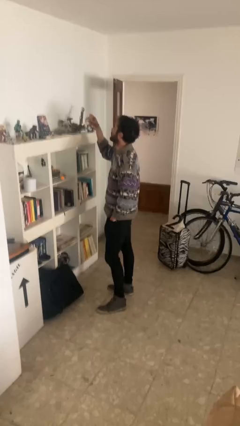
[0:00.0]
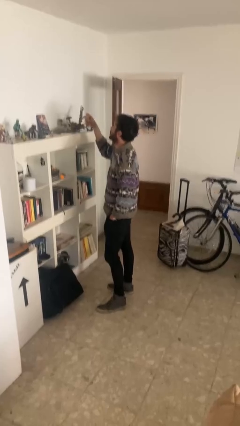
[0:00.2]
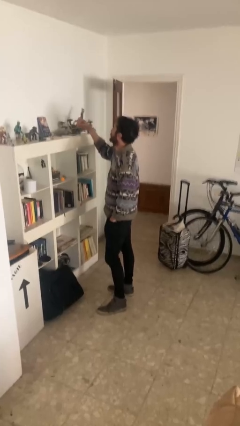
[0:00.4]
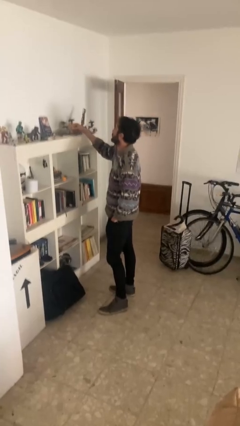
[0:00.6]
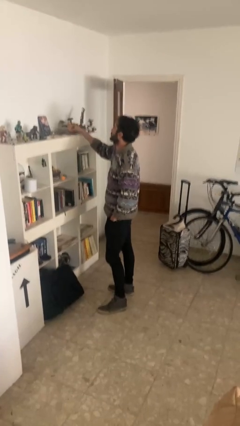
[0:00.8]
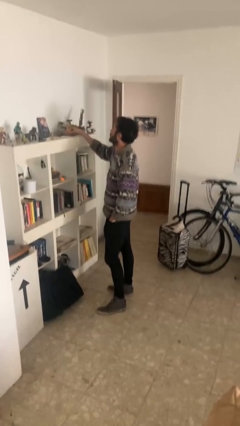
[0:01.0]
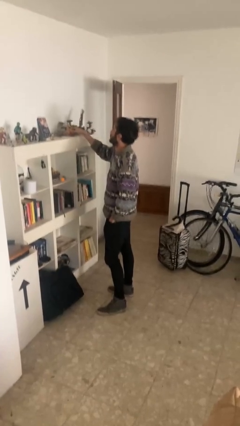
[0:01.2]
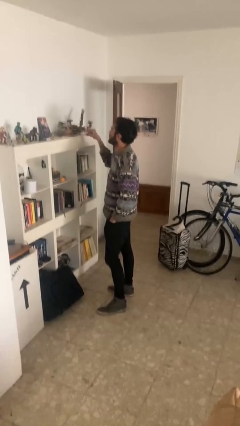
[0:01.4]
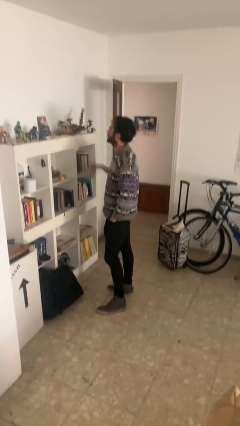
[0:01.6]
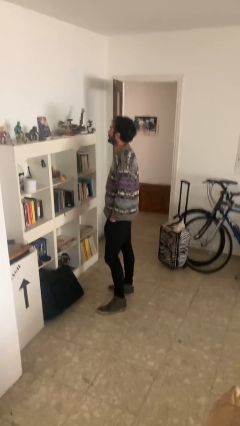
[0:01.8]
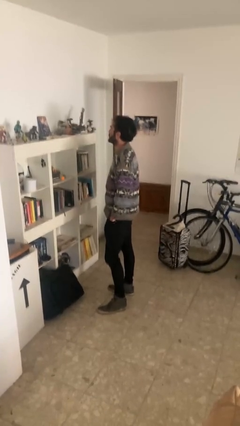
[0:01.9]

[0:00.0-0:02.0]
person puts down object on shelf

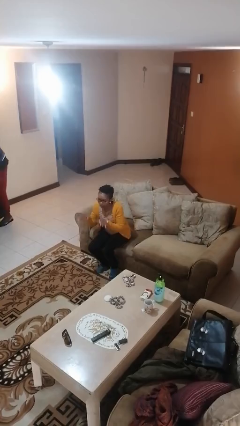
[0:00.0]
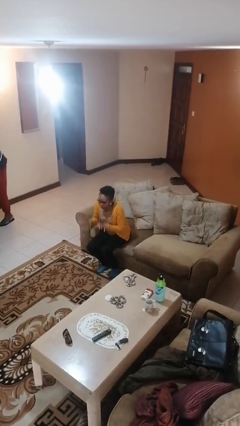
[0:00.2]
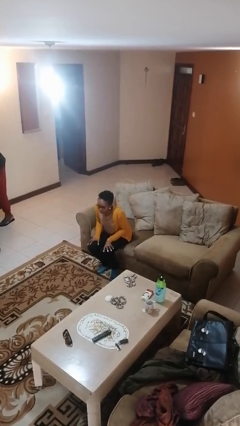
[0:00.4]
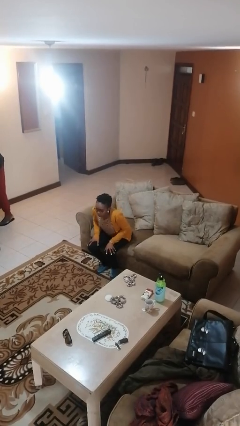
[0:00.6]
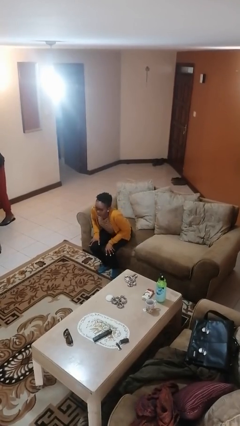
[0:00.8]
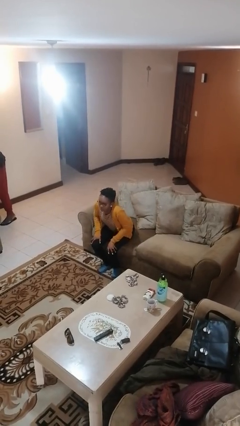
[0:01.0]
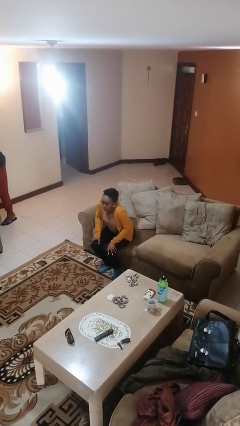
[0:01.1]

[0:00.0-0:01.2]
person slaps hands on thighs

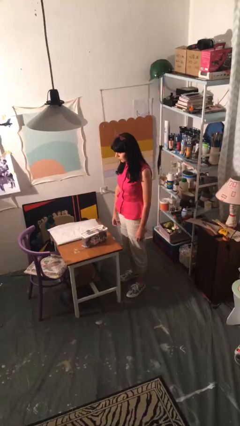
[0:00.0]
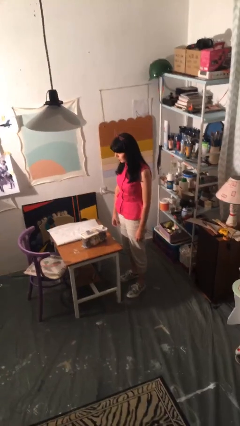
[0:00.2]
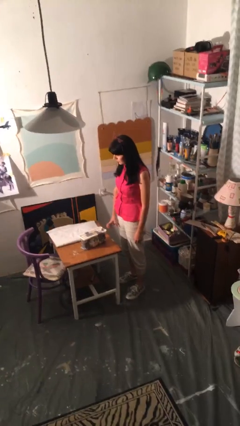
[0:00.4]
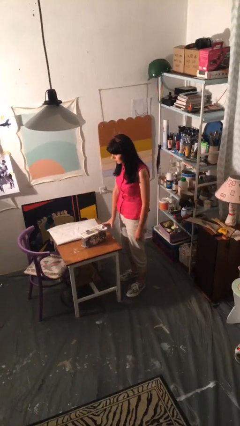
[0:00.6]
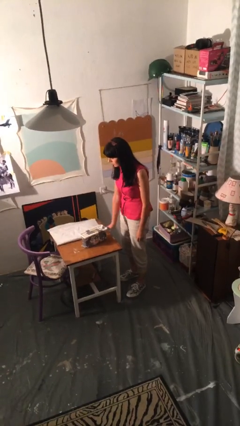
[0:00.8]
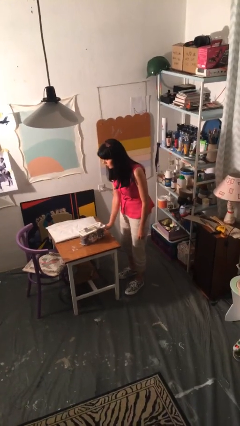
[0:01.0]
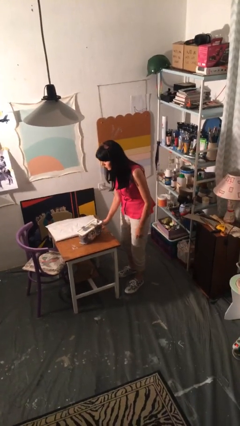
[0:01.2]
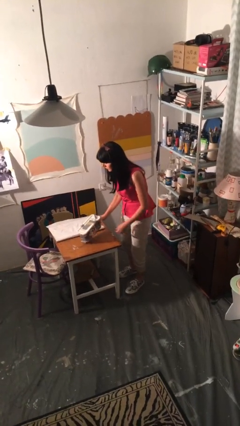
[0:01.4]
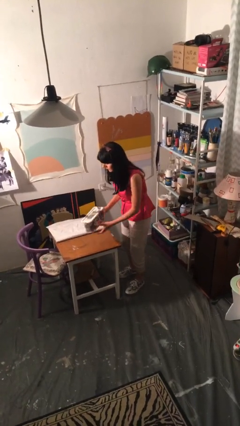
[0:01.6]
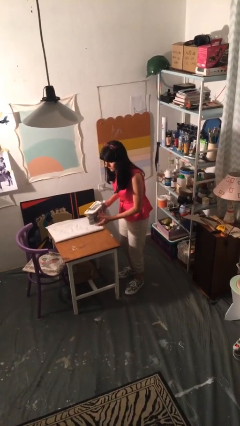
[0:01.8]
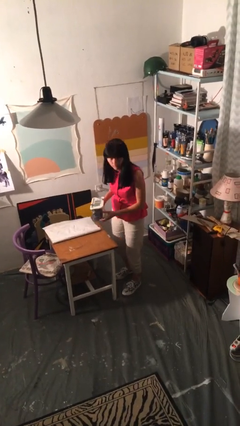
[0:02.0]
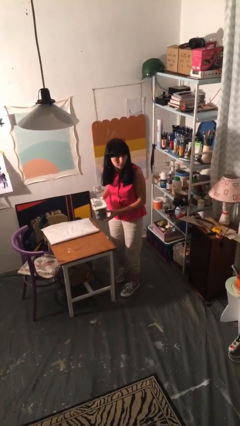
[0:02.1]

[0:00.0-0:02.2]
person picks up object from table

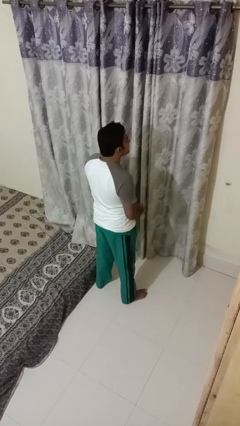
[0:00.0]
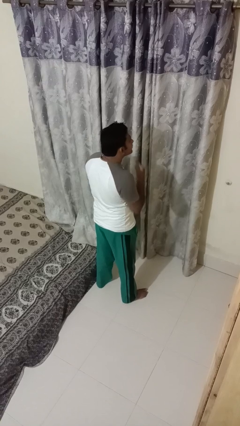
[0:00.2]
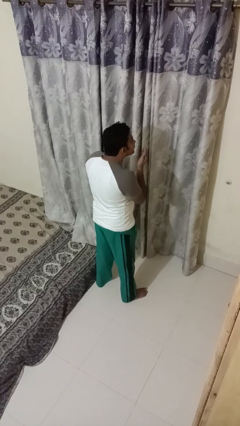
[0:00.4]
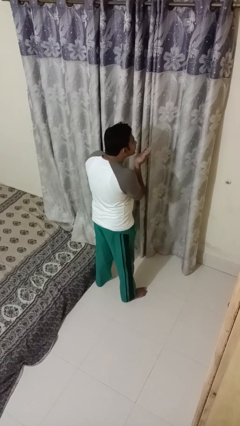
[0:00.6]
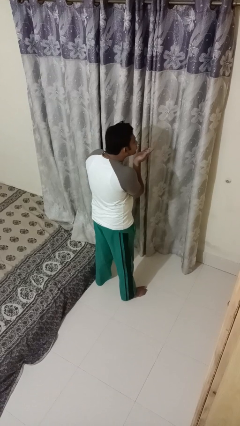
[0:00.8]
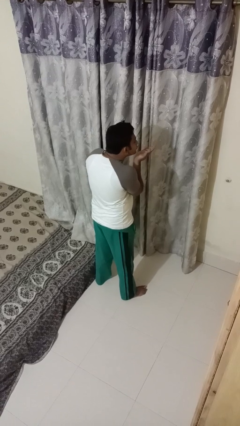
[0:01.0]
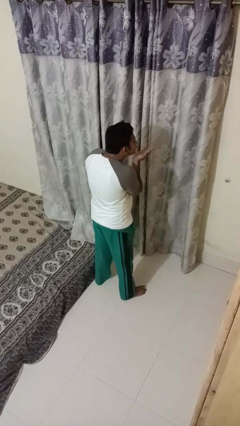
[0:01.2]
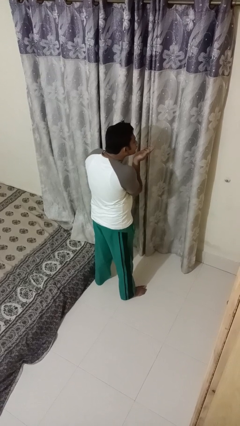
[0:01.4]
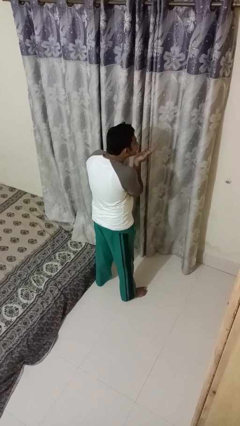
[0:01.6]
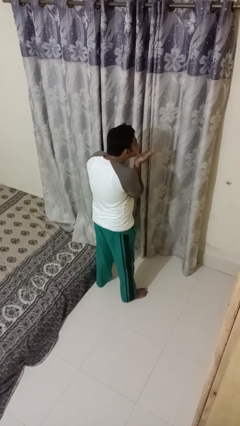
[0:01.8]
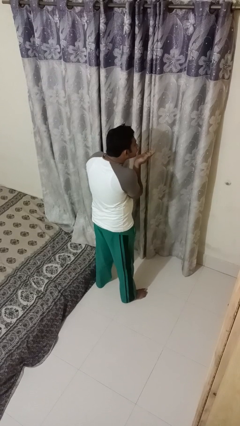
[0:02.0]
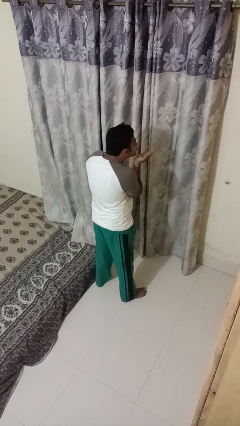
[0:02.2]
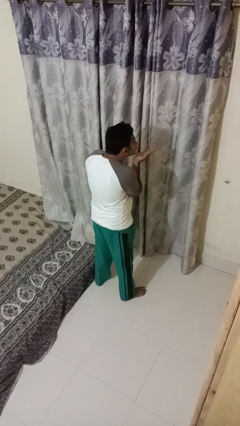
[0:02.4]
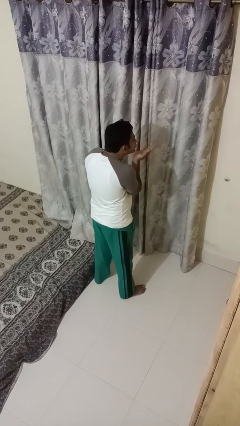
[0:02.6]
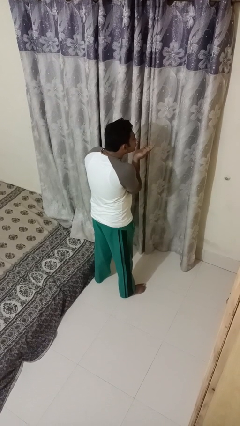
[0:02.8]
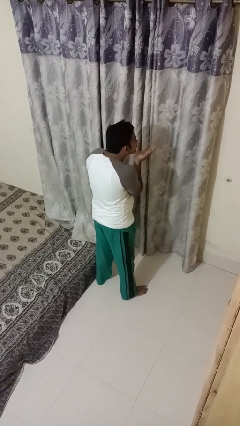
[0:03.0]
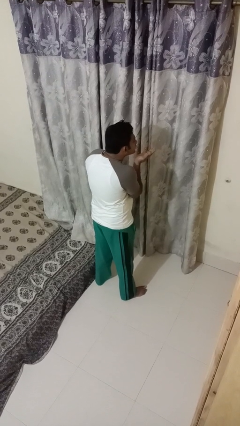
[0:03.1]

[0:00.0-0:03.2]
person gestures blow kiss

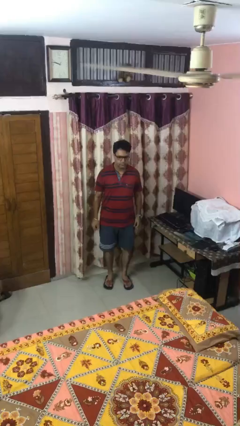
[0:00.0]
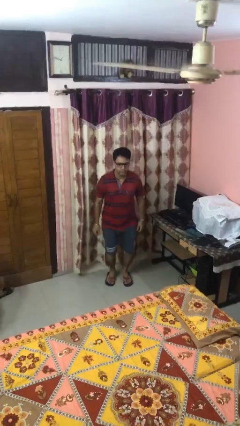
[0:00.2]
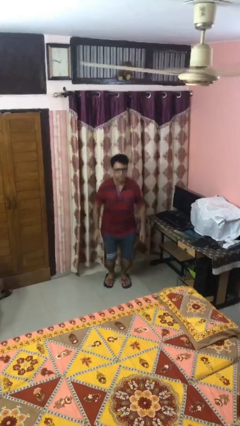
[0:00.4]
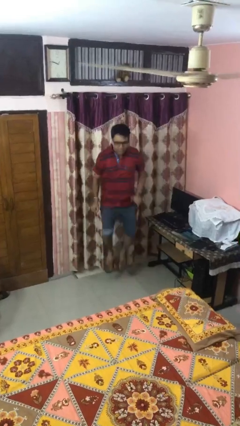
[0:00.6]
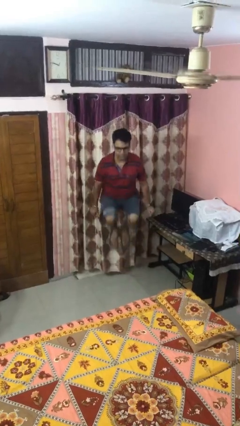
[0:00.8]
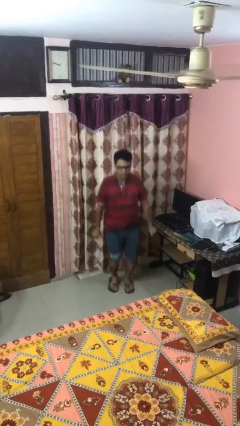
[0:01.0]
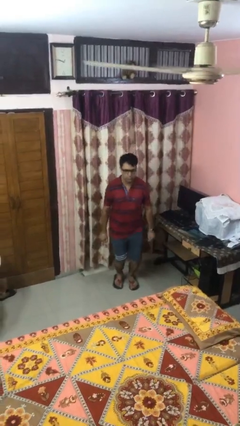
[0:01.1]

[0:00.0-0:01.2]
person jumps

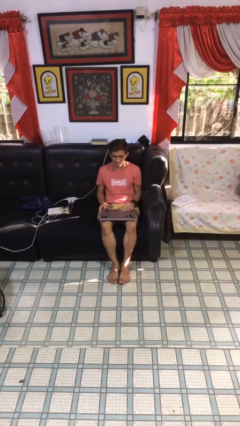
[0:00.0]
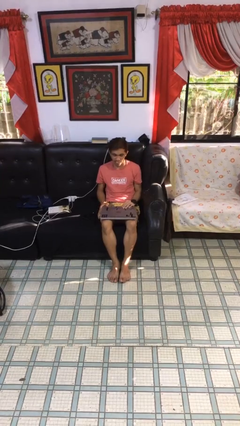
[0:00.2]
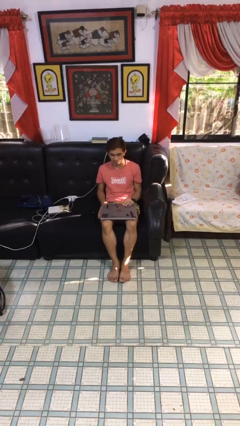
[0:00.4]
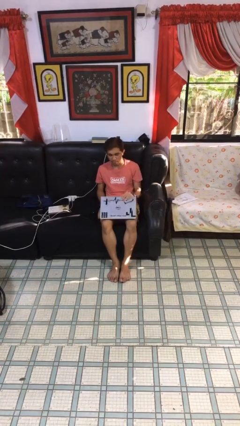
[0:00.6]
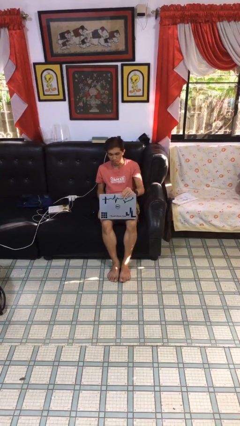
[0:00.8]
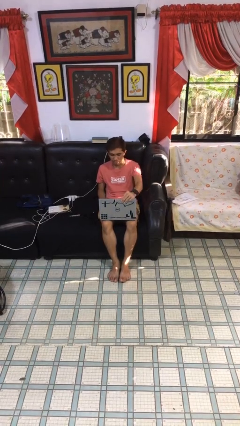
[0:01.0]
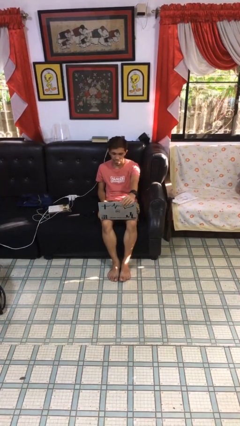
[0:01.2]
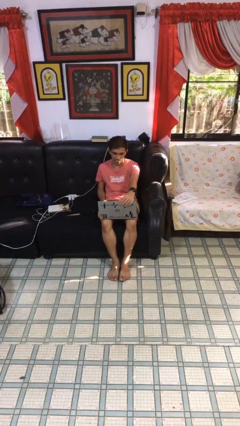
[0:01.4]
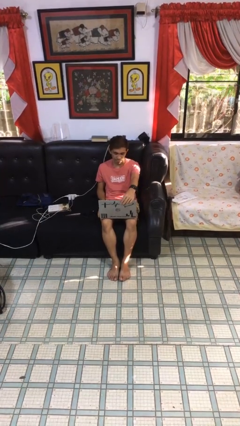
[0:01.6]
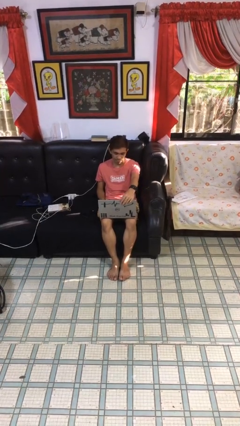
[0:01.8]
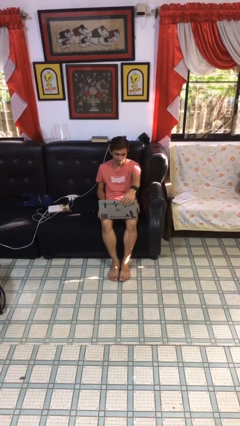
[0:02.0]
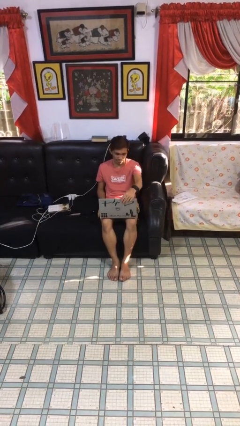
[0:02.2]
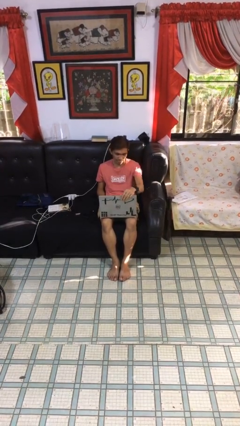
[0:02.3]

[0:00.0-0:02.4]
person interacts with laptop

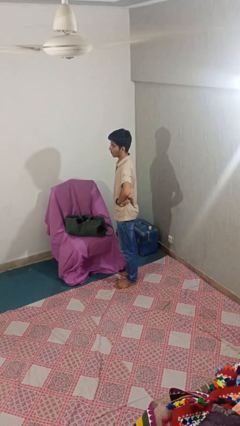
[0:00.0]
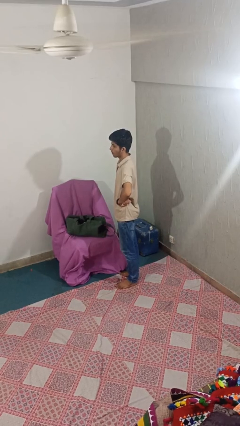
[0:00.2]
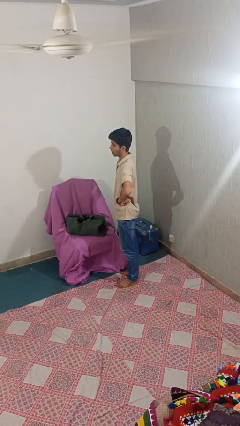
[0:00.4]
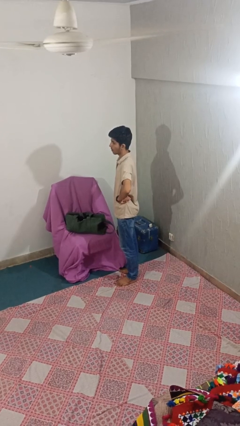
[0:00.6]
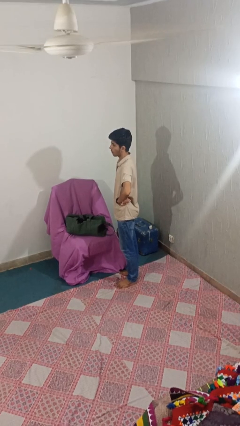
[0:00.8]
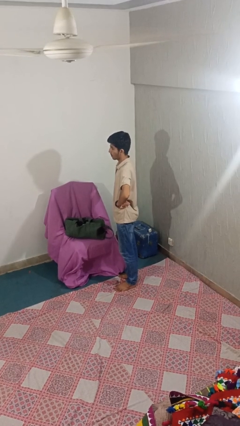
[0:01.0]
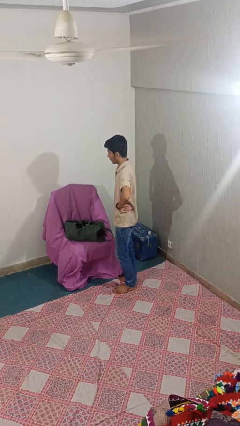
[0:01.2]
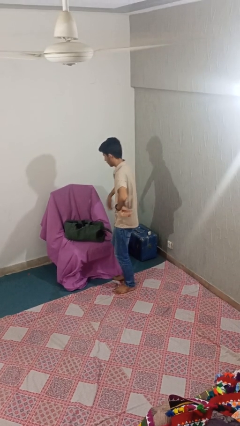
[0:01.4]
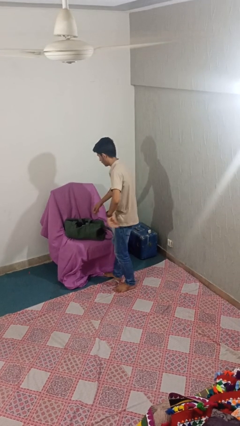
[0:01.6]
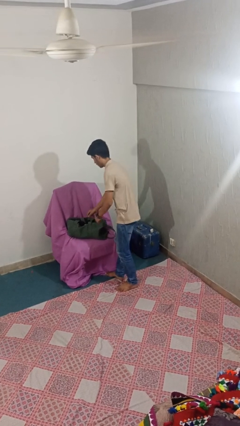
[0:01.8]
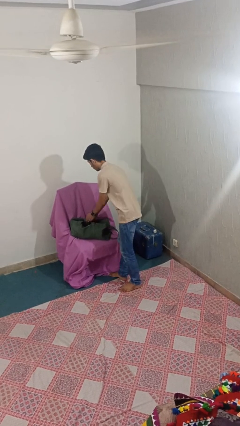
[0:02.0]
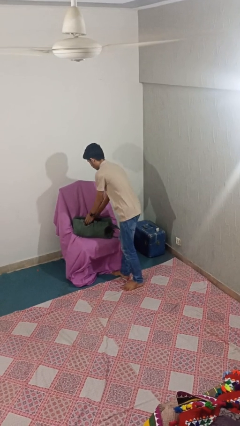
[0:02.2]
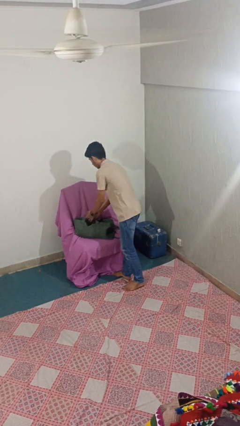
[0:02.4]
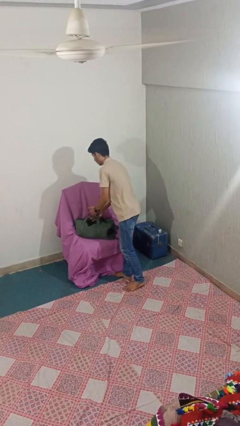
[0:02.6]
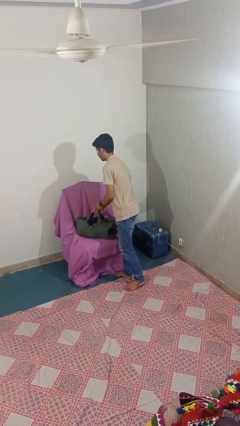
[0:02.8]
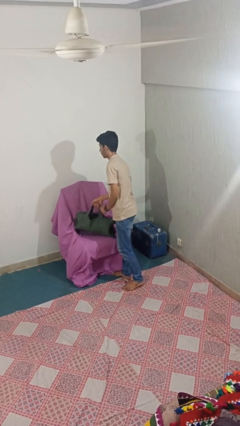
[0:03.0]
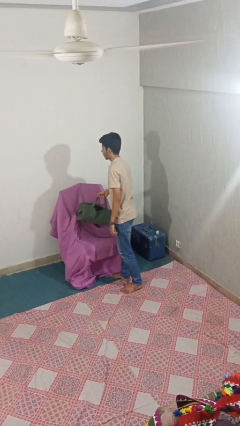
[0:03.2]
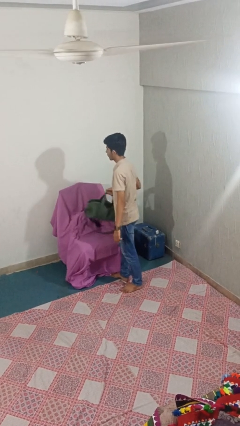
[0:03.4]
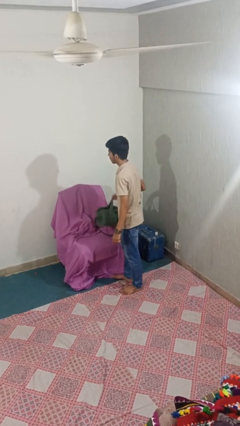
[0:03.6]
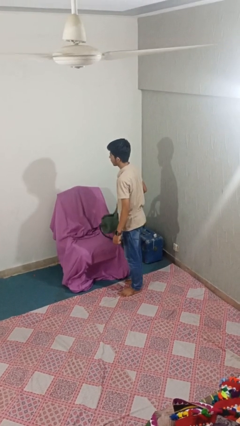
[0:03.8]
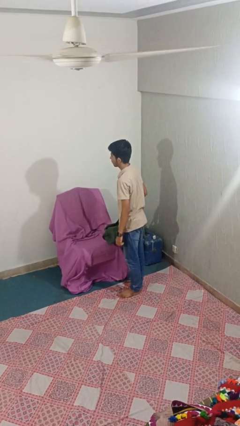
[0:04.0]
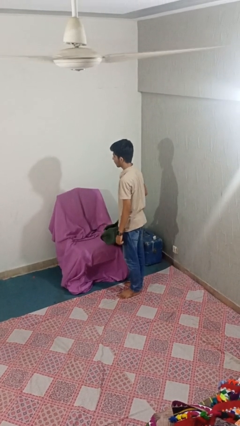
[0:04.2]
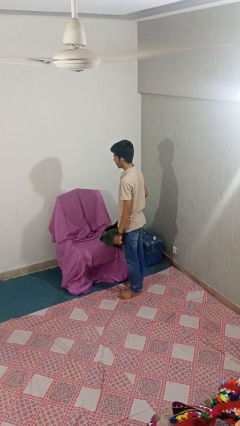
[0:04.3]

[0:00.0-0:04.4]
person picks up object from couch

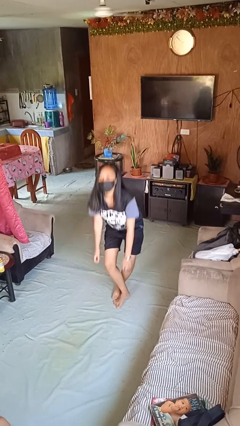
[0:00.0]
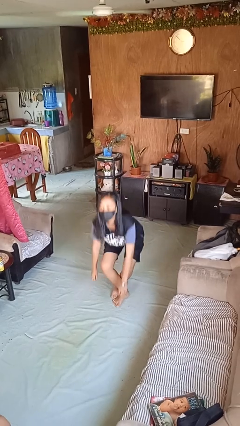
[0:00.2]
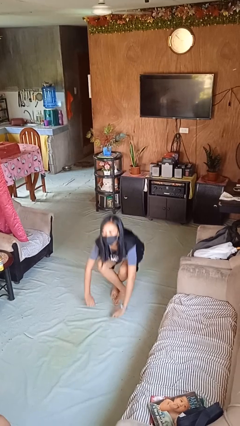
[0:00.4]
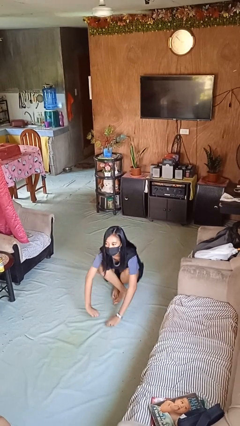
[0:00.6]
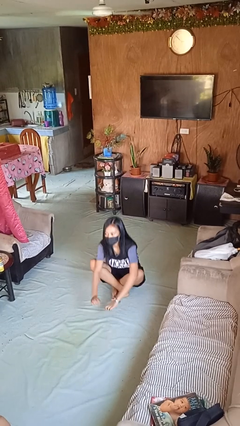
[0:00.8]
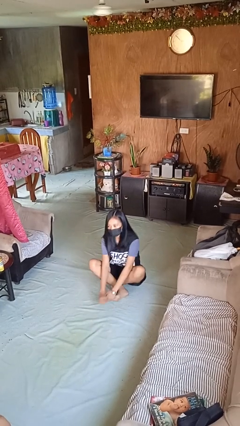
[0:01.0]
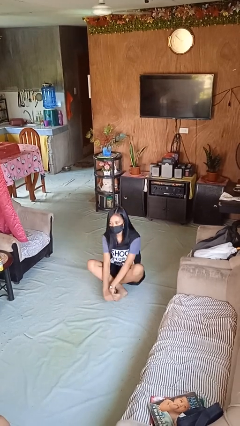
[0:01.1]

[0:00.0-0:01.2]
person sits crisscross
